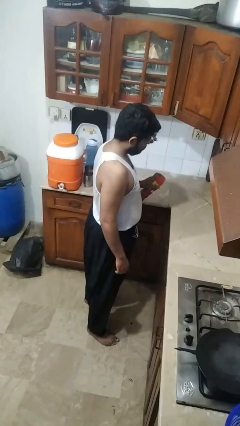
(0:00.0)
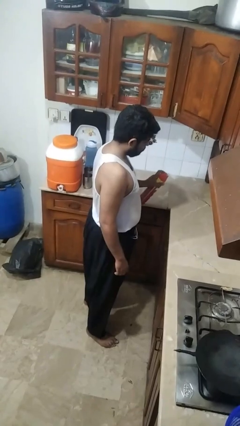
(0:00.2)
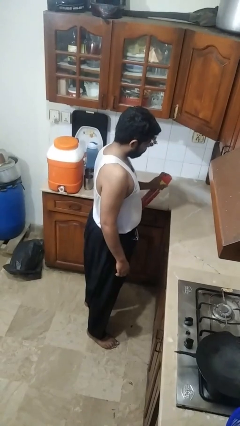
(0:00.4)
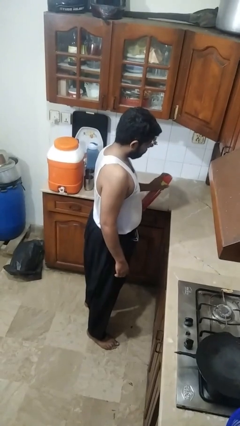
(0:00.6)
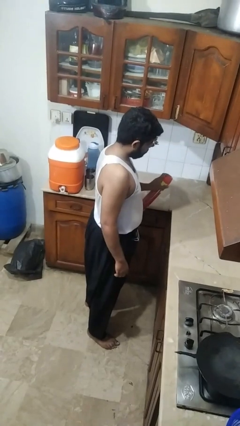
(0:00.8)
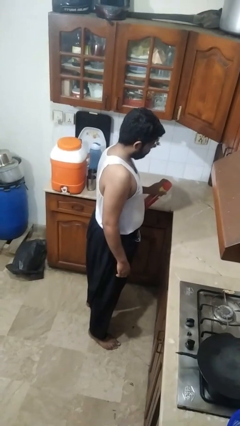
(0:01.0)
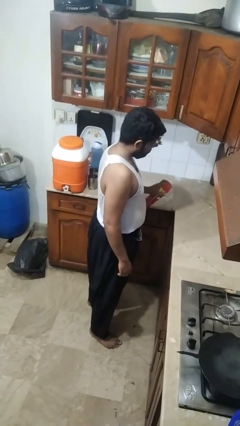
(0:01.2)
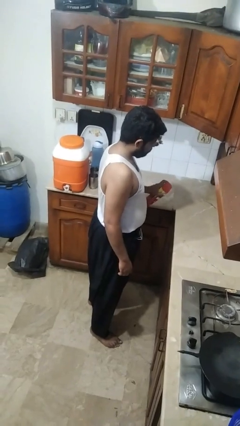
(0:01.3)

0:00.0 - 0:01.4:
person sprays from bottle

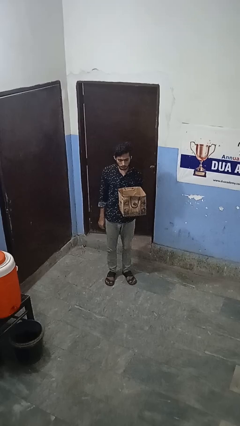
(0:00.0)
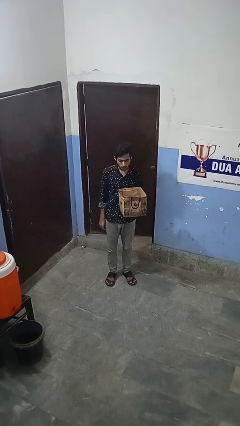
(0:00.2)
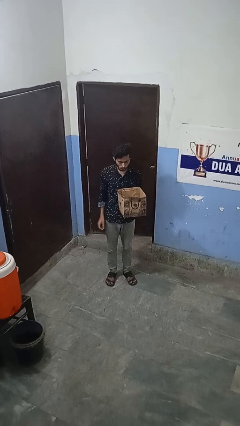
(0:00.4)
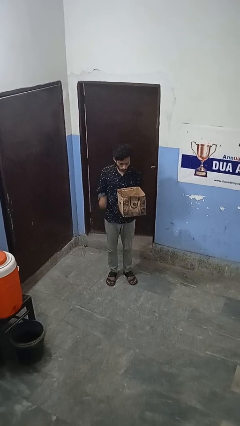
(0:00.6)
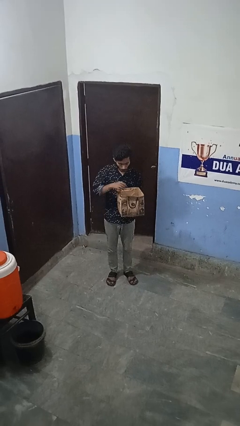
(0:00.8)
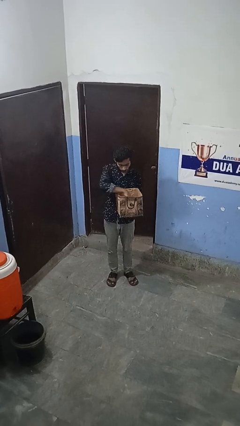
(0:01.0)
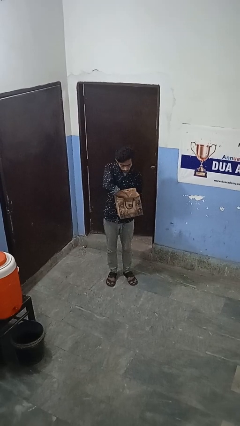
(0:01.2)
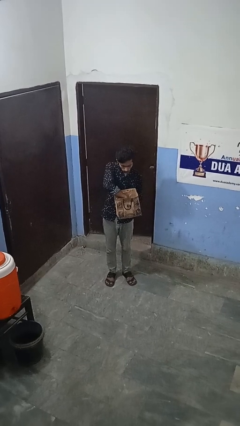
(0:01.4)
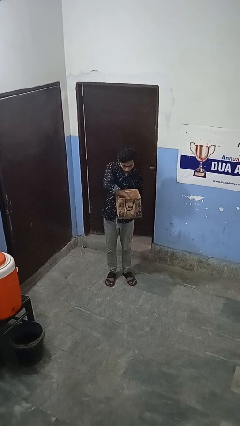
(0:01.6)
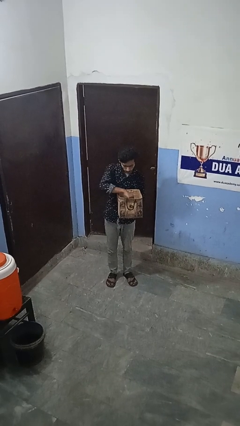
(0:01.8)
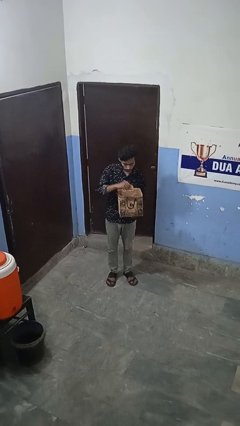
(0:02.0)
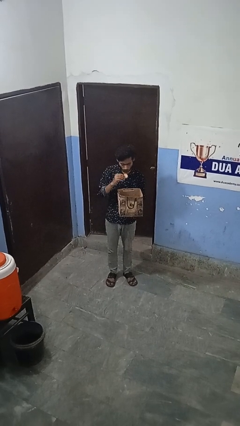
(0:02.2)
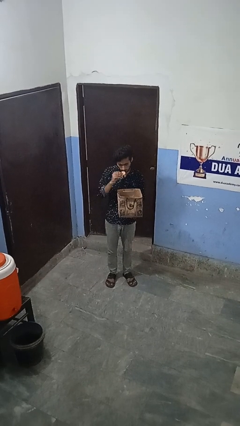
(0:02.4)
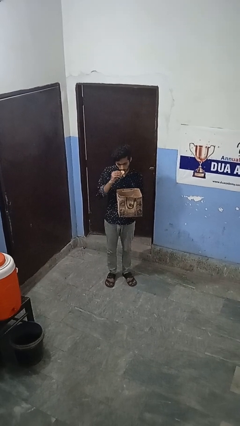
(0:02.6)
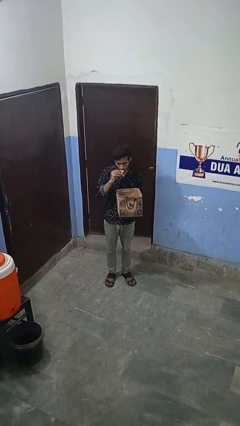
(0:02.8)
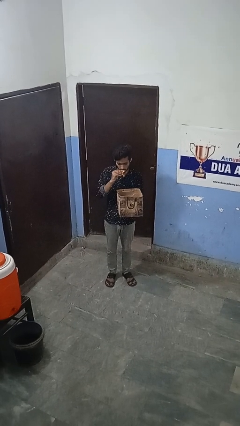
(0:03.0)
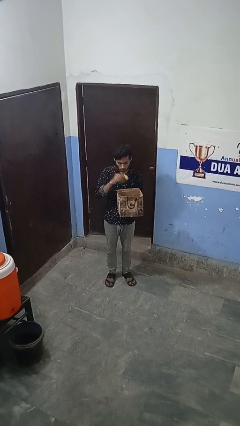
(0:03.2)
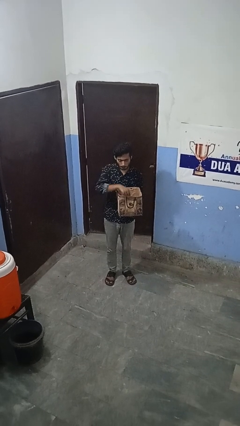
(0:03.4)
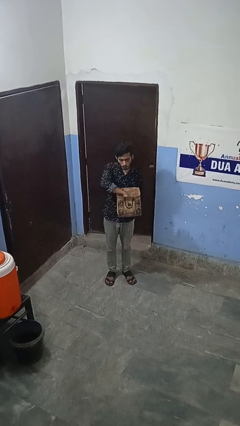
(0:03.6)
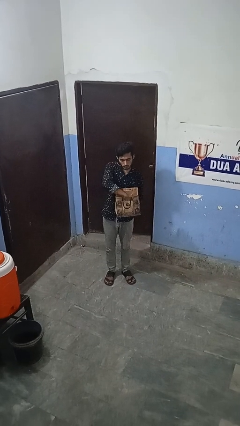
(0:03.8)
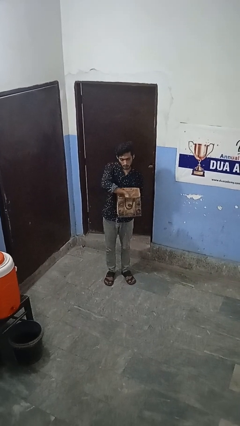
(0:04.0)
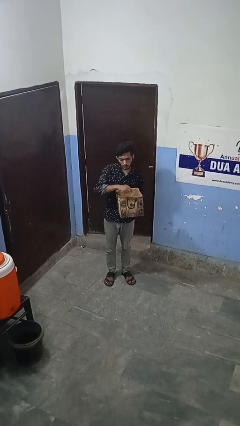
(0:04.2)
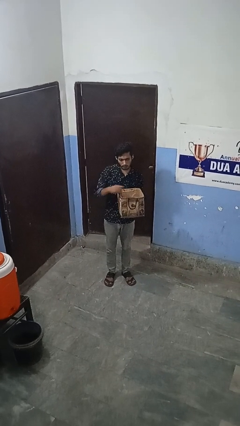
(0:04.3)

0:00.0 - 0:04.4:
person eats snack from bag

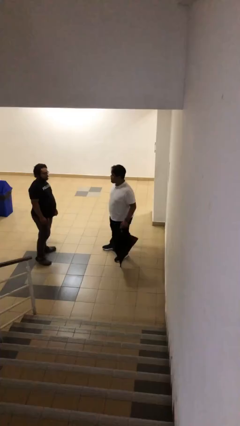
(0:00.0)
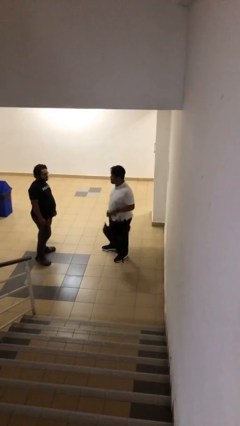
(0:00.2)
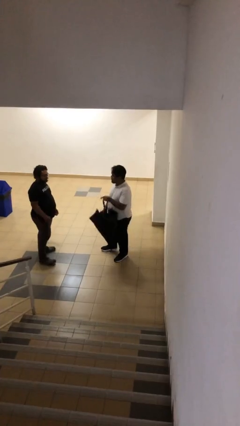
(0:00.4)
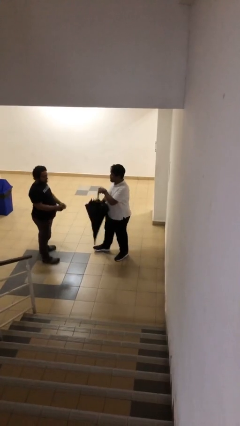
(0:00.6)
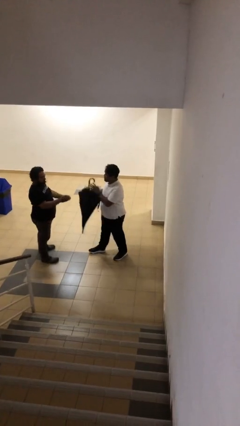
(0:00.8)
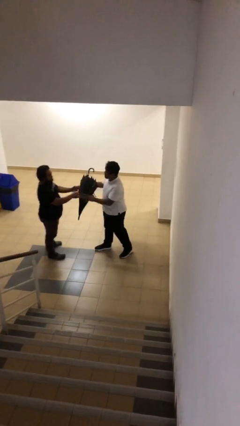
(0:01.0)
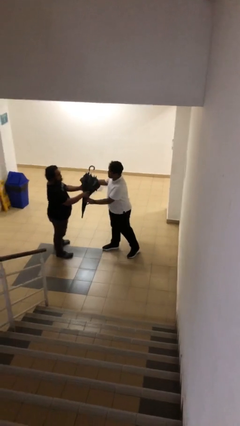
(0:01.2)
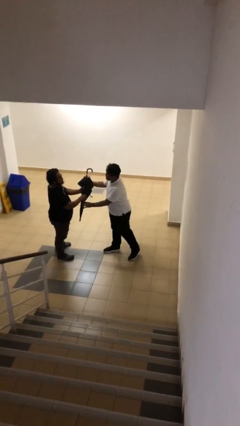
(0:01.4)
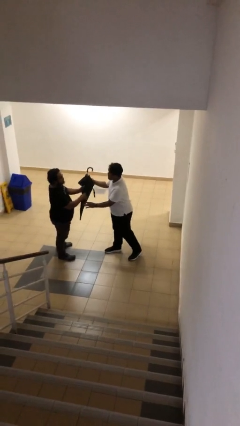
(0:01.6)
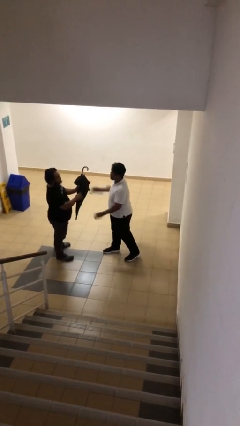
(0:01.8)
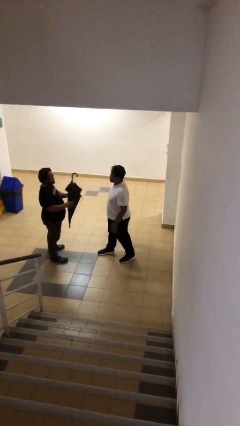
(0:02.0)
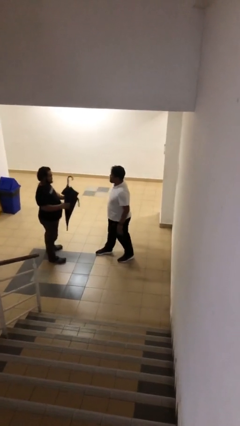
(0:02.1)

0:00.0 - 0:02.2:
person transfers object to person

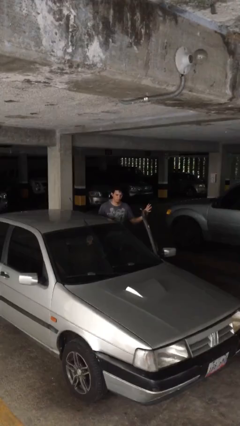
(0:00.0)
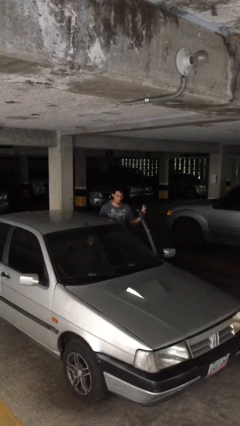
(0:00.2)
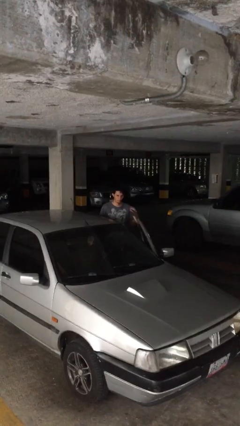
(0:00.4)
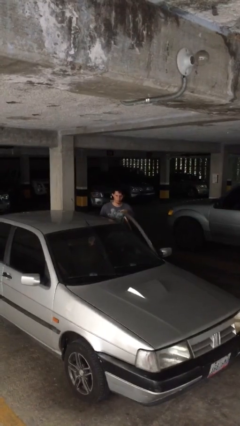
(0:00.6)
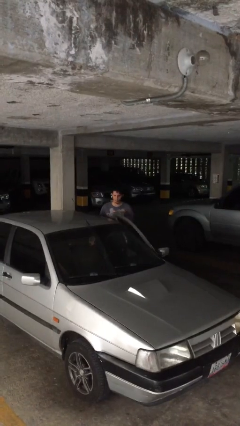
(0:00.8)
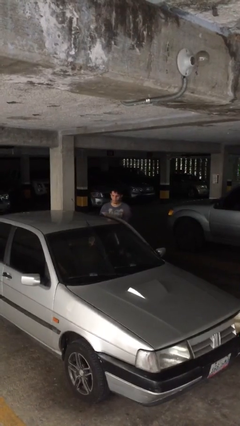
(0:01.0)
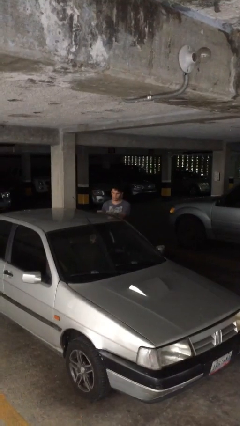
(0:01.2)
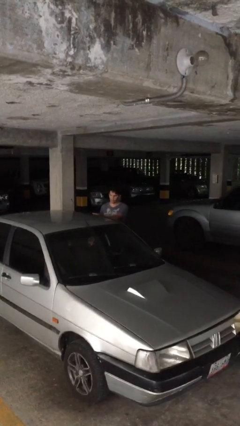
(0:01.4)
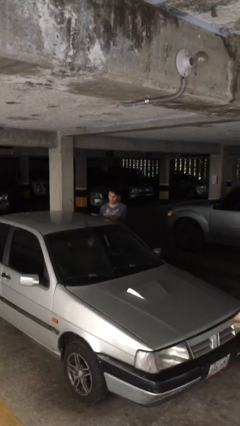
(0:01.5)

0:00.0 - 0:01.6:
person closes car door

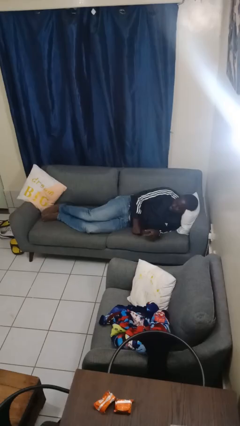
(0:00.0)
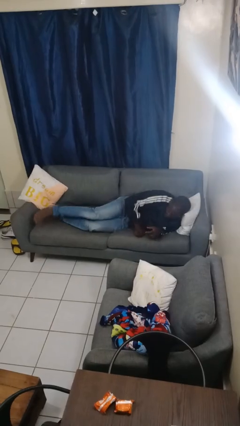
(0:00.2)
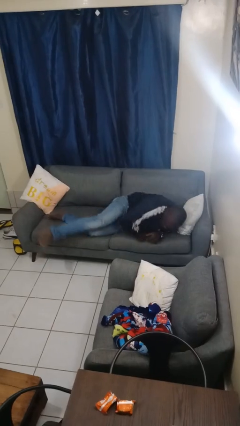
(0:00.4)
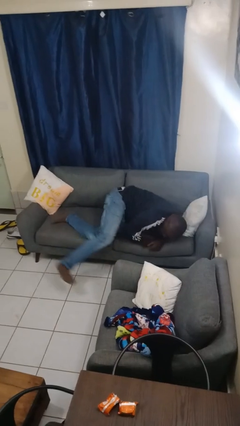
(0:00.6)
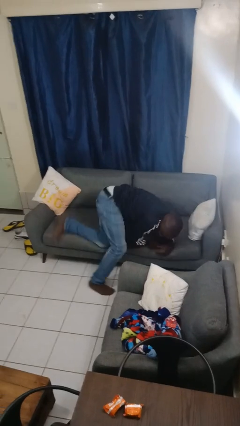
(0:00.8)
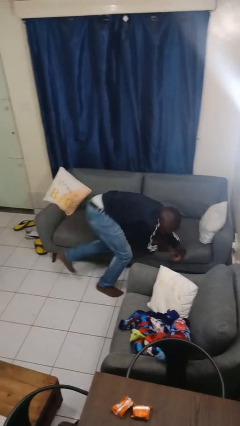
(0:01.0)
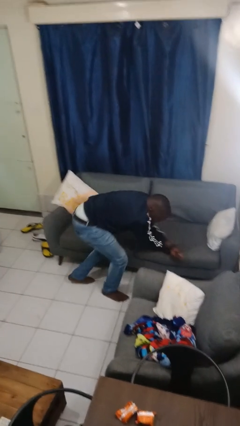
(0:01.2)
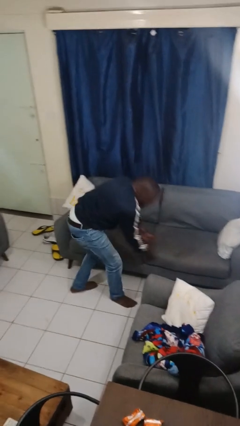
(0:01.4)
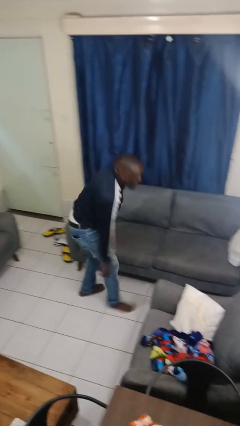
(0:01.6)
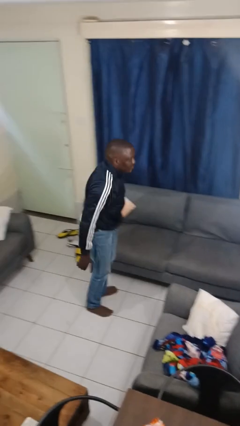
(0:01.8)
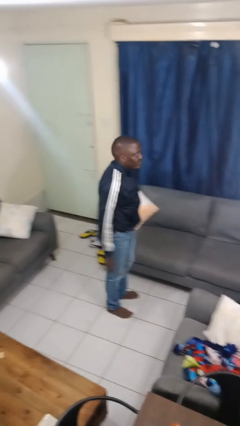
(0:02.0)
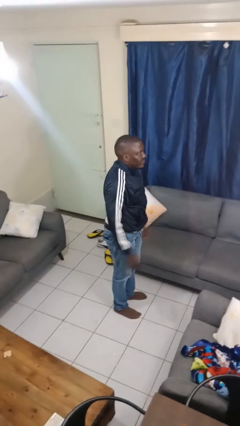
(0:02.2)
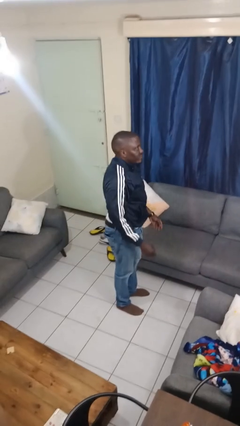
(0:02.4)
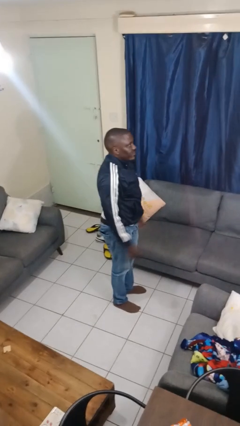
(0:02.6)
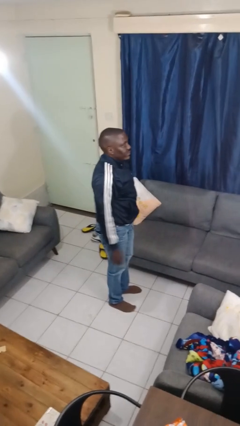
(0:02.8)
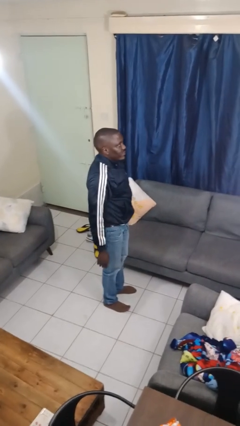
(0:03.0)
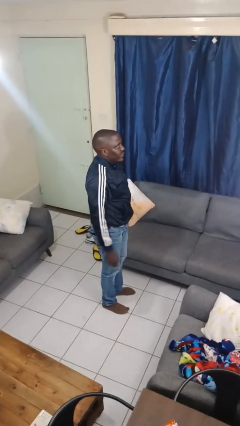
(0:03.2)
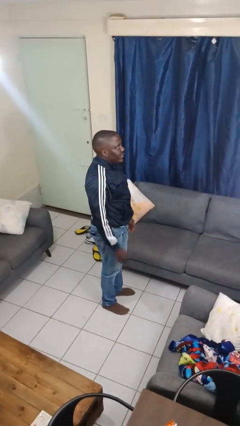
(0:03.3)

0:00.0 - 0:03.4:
person stands up

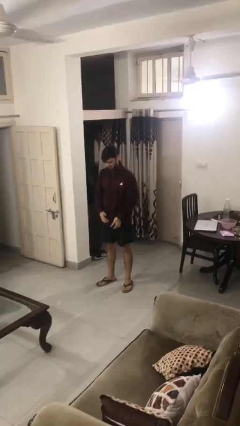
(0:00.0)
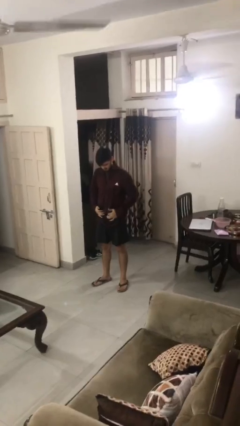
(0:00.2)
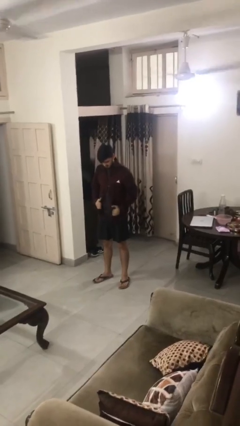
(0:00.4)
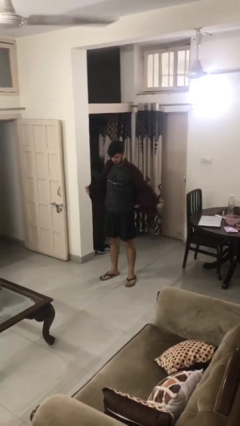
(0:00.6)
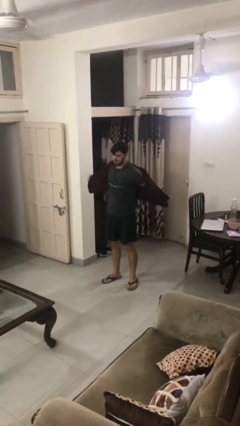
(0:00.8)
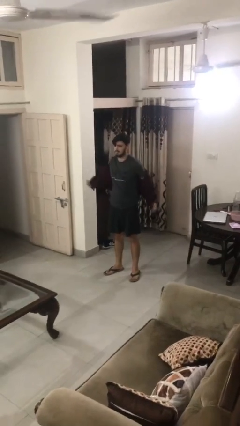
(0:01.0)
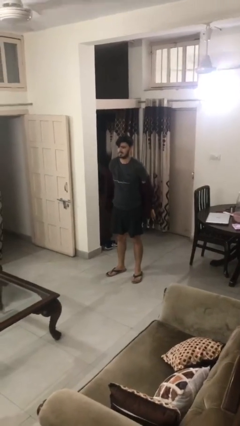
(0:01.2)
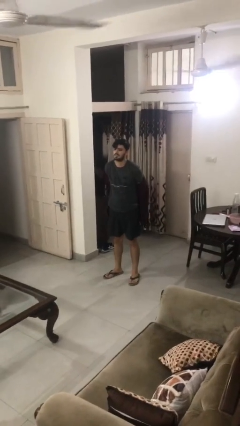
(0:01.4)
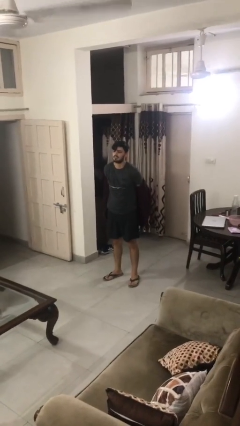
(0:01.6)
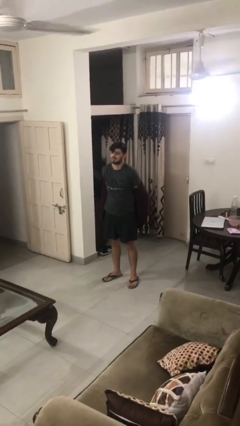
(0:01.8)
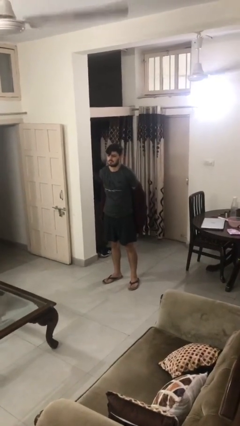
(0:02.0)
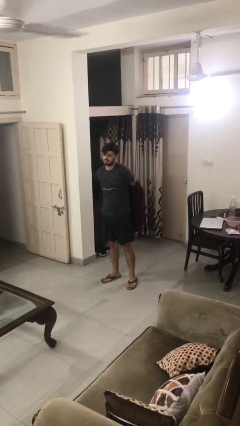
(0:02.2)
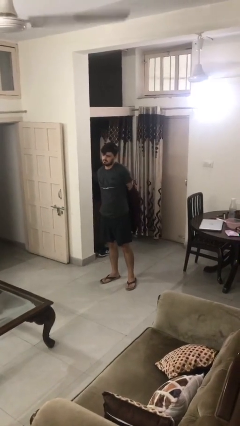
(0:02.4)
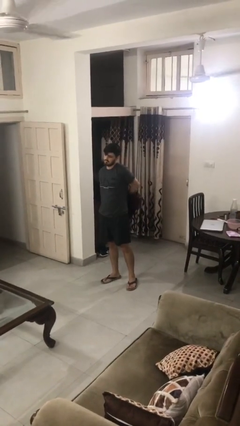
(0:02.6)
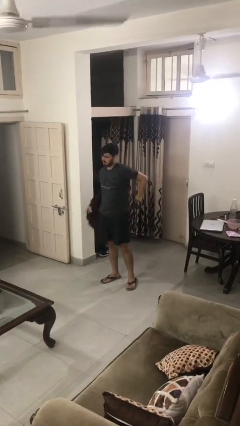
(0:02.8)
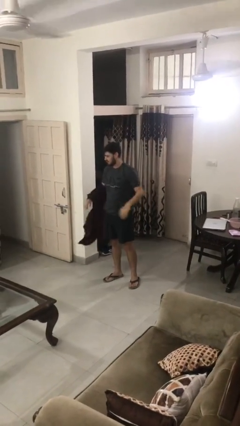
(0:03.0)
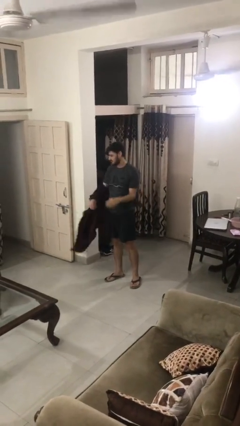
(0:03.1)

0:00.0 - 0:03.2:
person takes off jacket

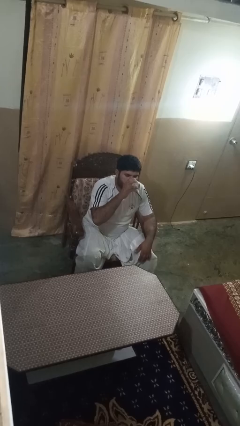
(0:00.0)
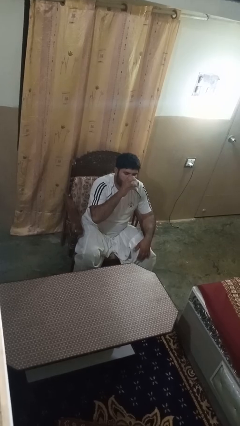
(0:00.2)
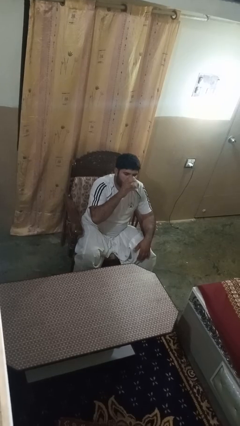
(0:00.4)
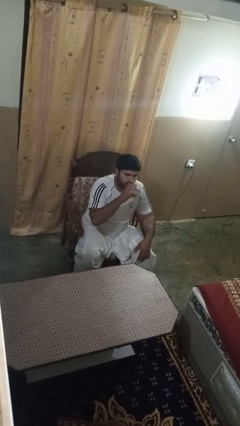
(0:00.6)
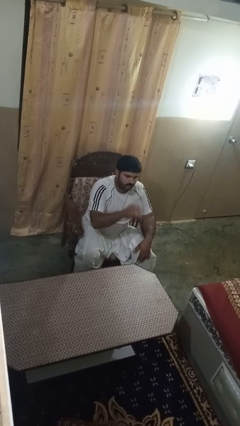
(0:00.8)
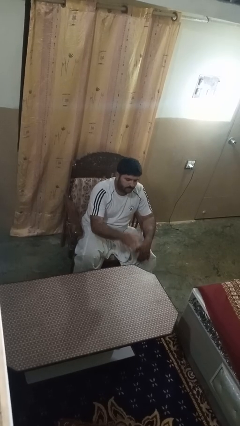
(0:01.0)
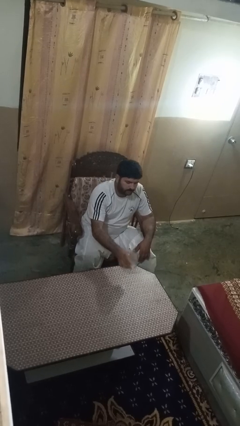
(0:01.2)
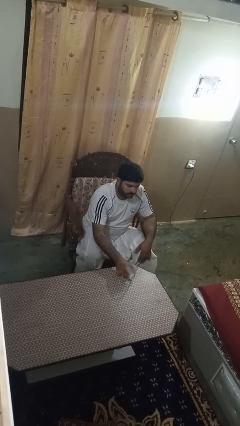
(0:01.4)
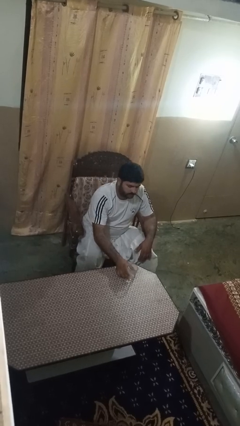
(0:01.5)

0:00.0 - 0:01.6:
person puts down object on table
